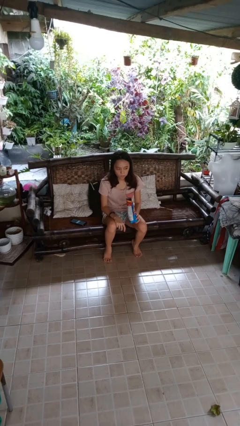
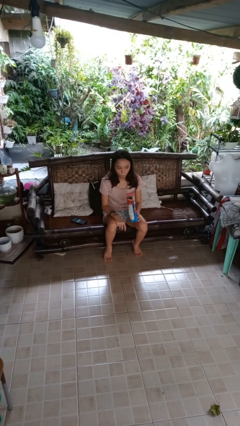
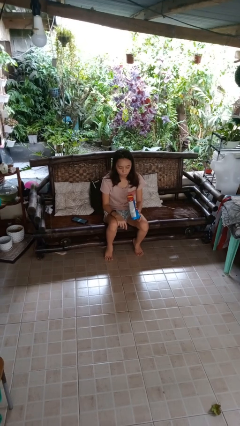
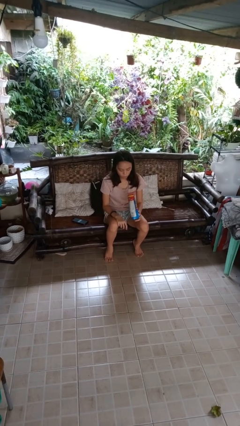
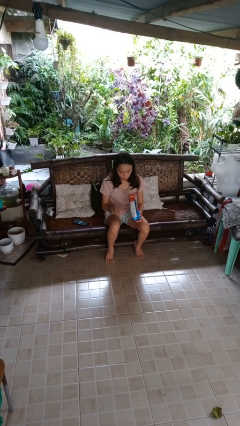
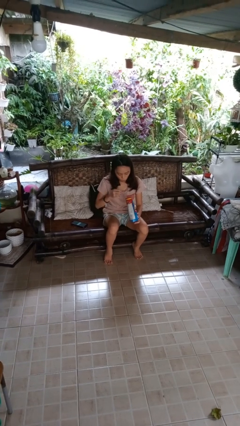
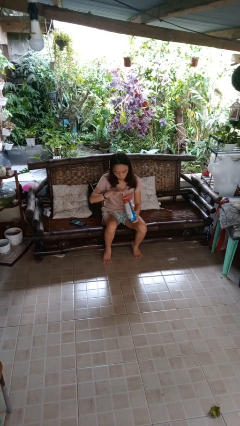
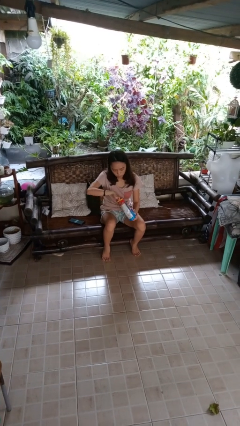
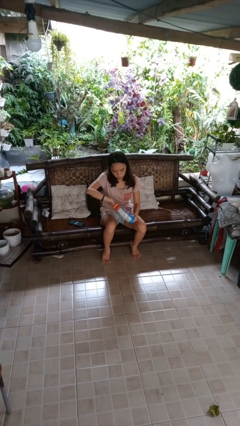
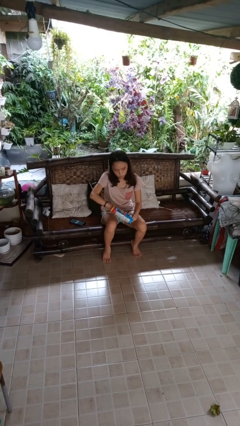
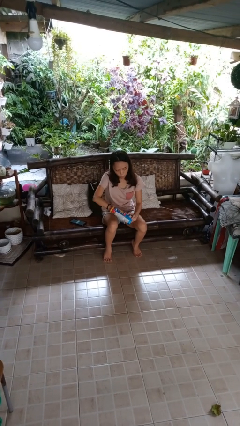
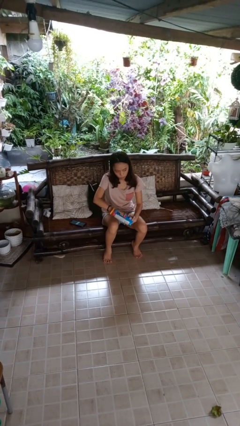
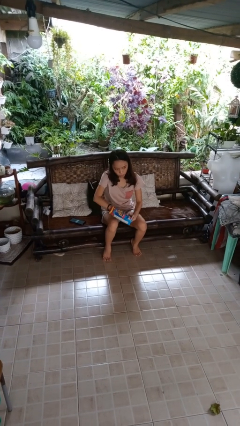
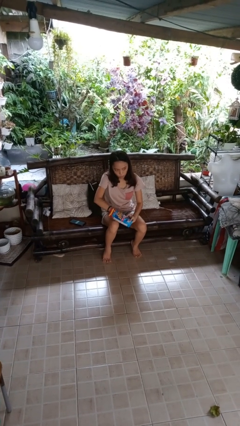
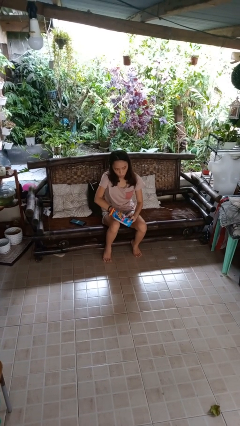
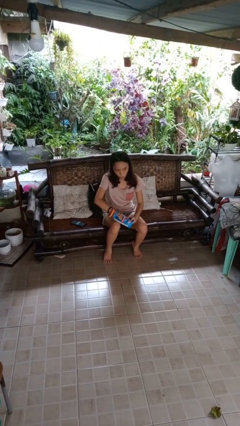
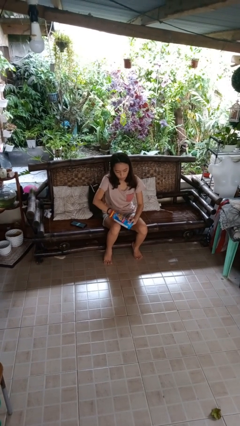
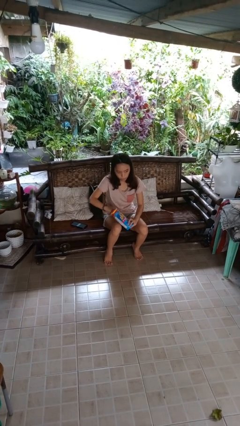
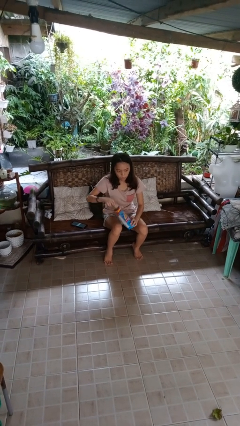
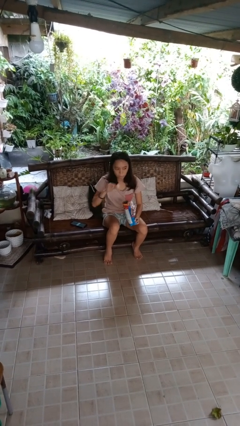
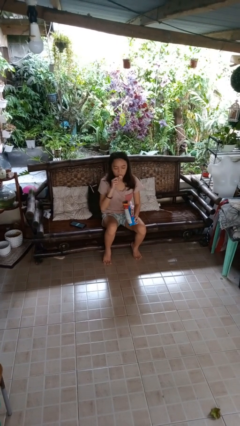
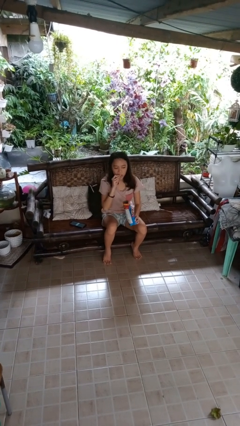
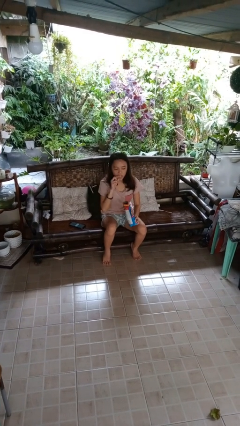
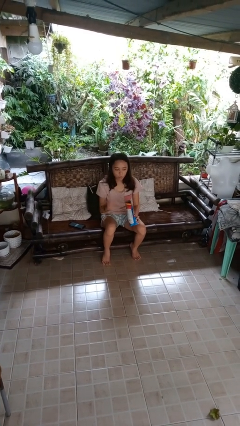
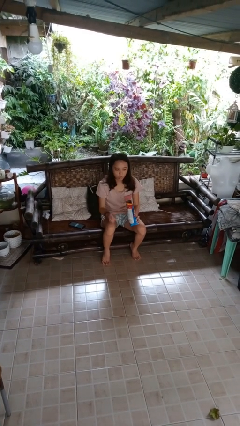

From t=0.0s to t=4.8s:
person eats snack from bag

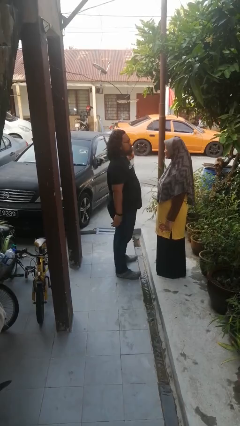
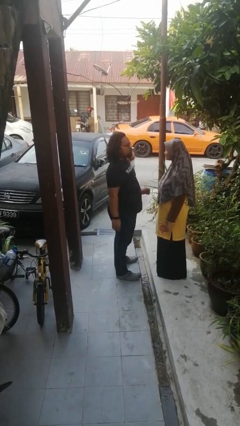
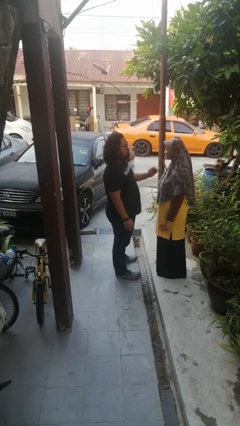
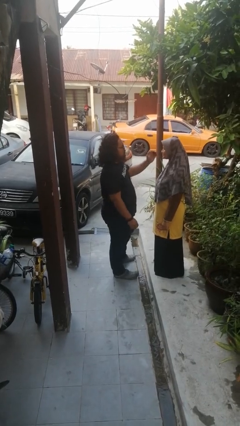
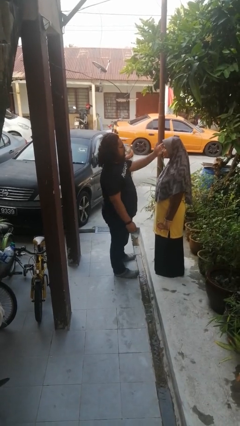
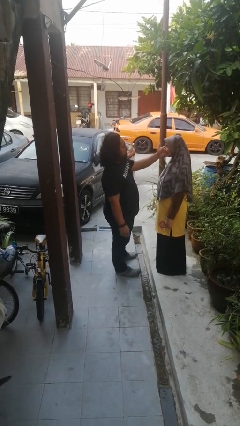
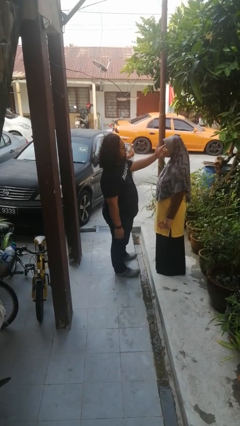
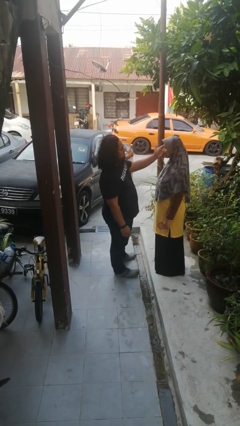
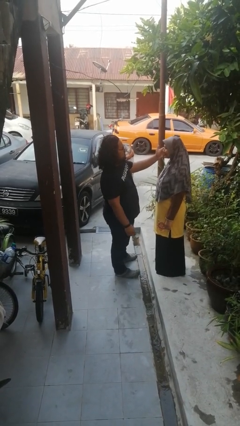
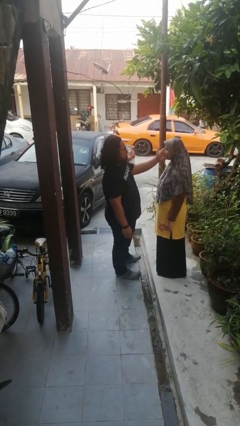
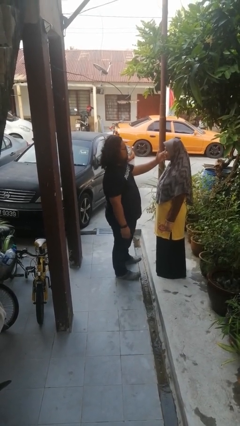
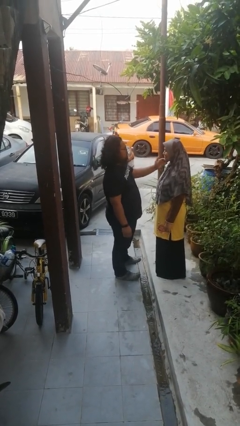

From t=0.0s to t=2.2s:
person touches face of person

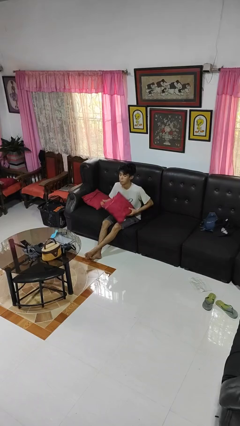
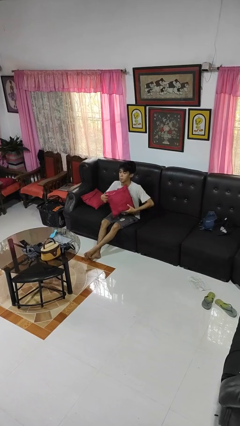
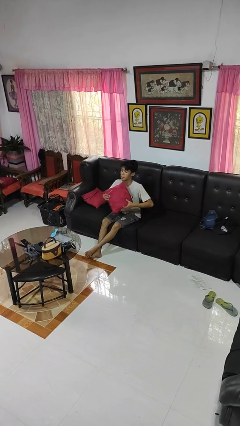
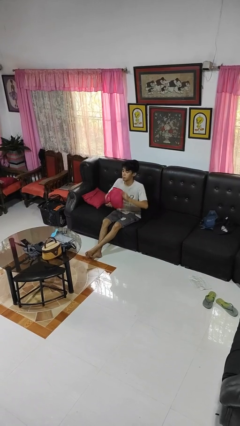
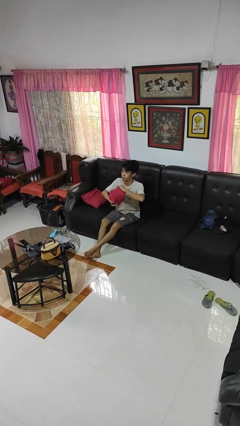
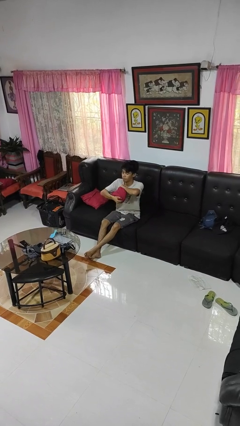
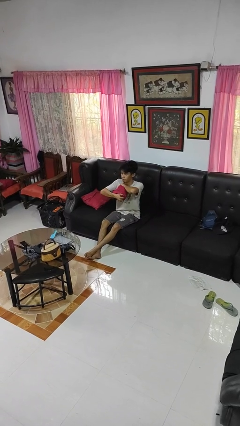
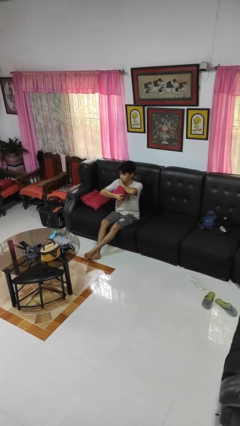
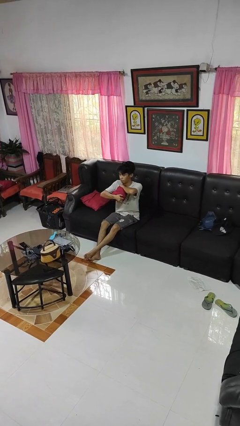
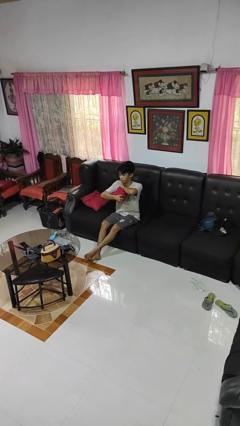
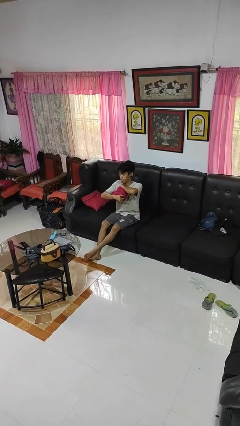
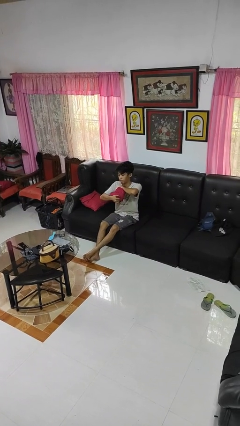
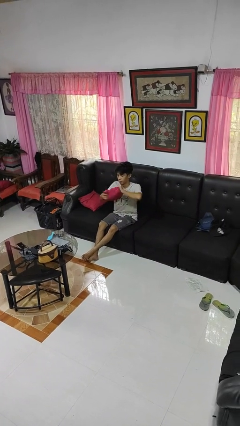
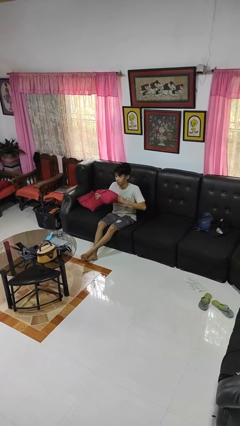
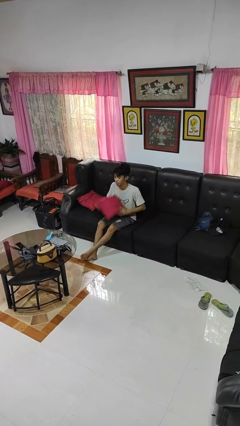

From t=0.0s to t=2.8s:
person squeezes object

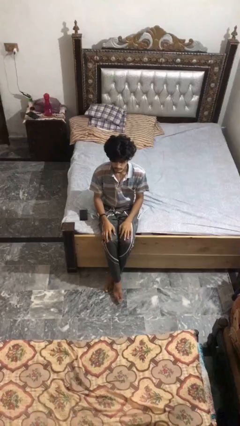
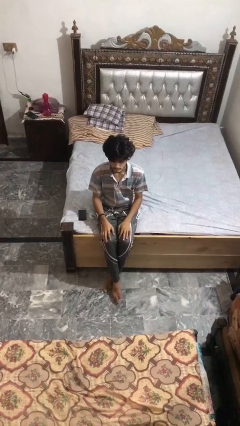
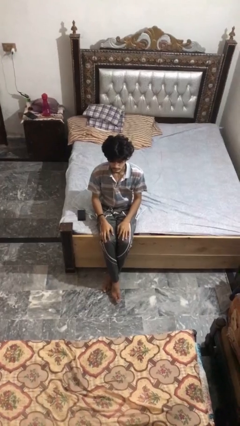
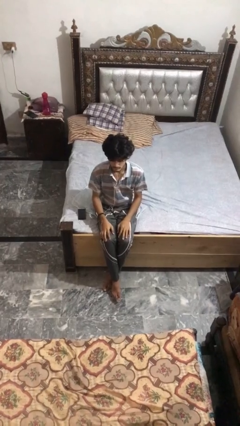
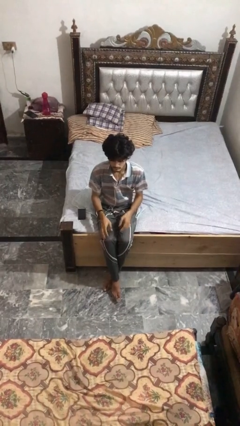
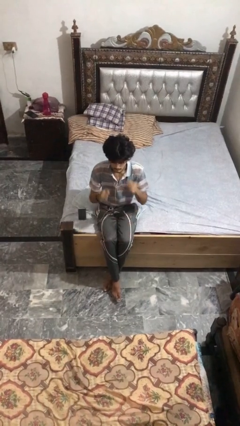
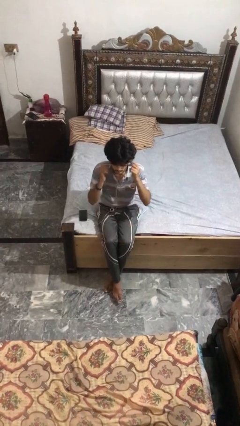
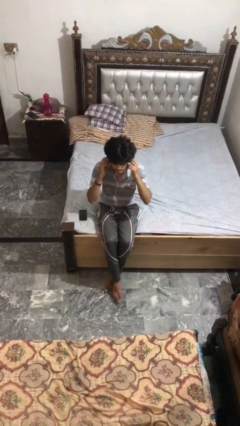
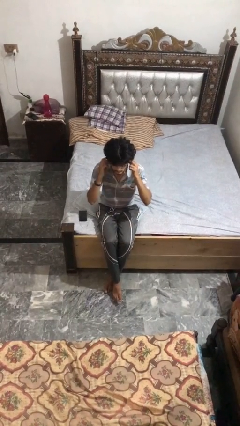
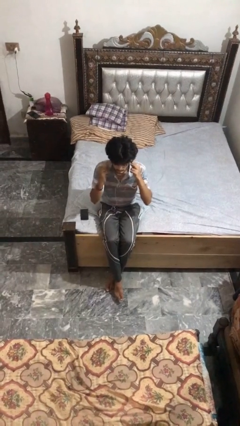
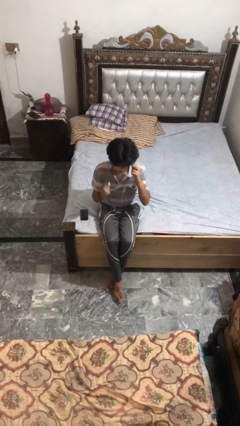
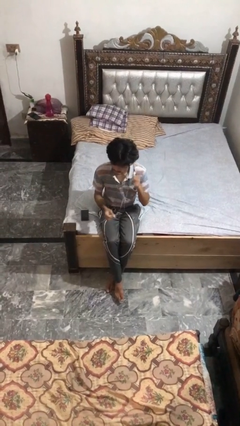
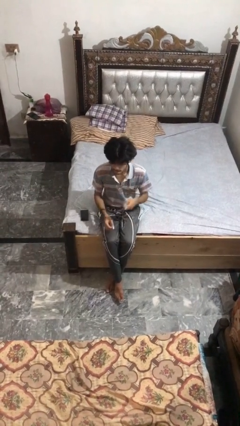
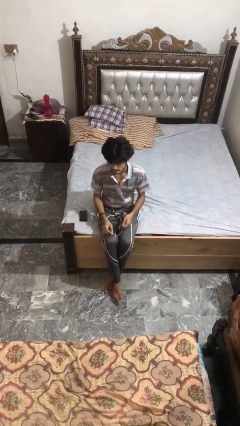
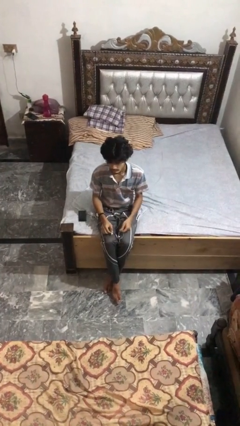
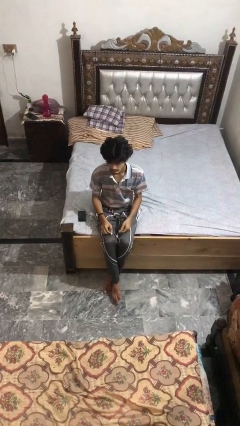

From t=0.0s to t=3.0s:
person takes off headphones

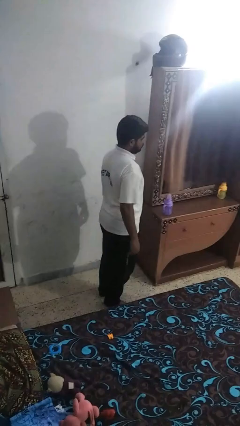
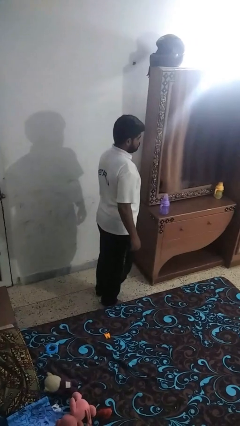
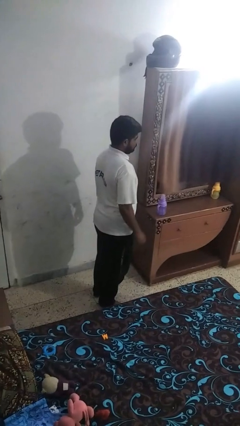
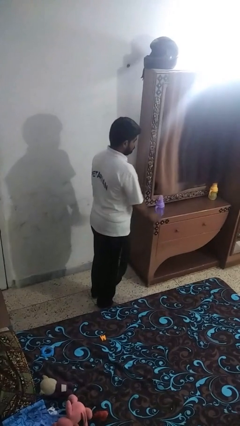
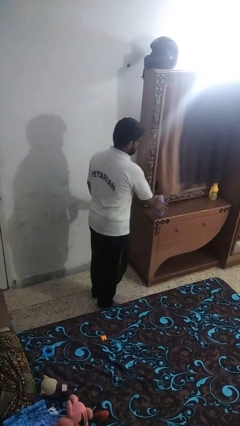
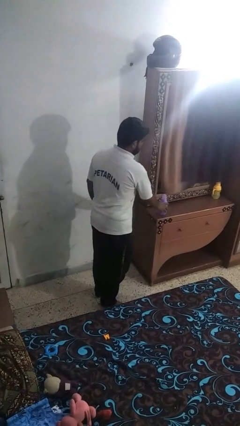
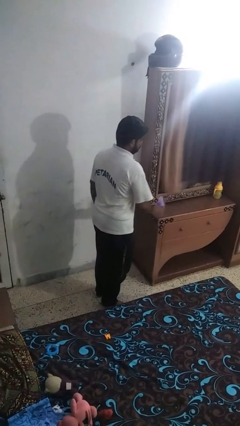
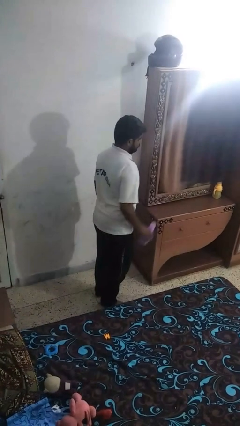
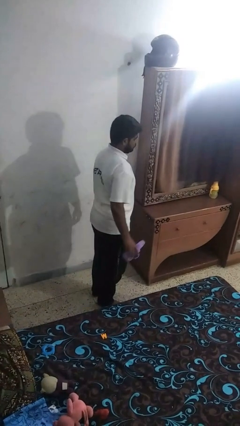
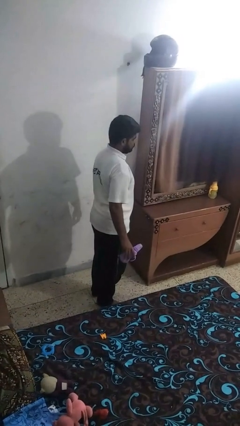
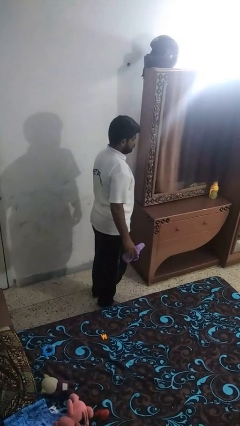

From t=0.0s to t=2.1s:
person picks up object from countertop

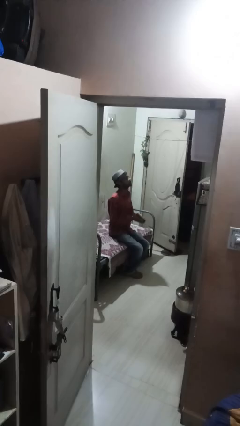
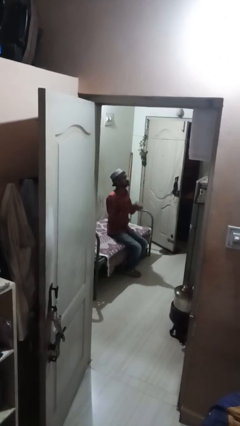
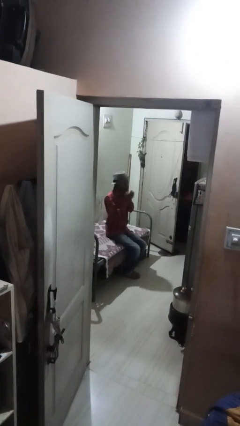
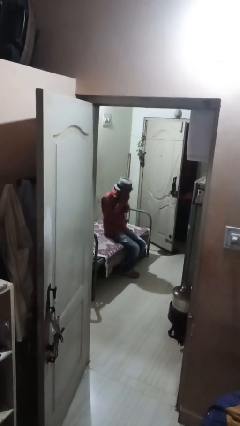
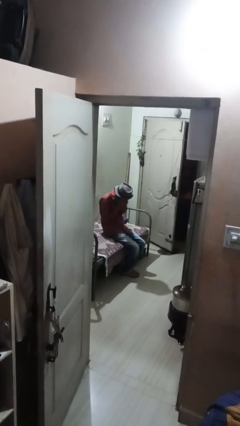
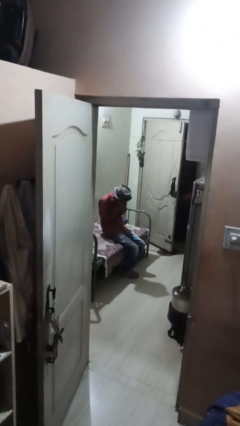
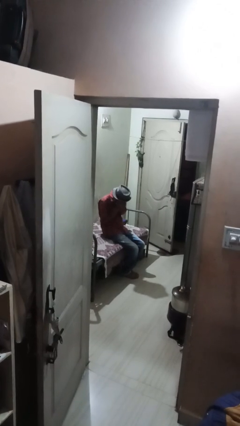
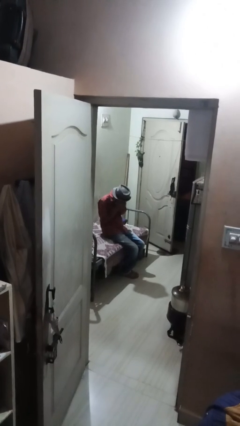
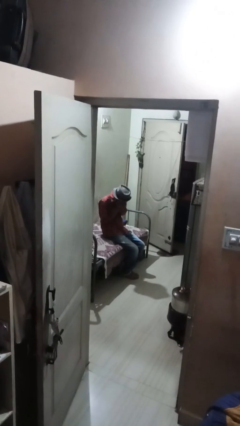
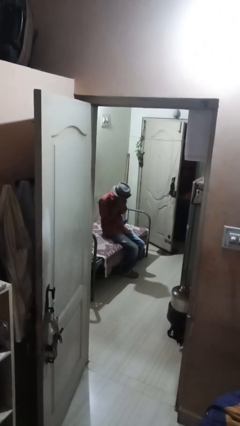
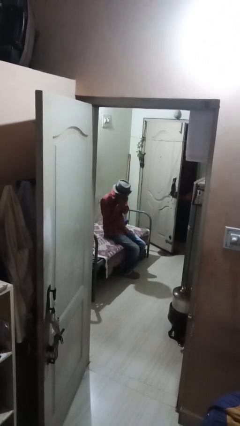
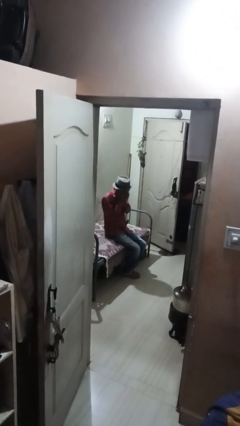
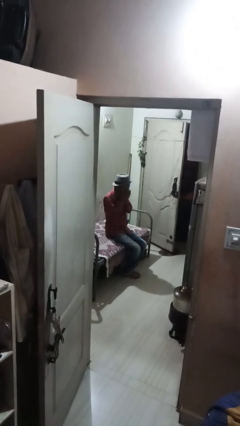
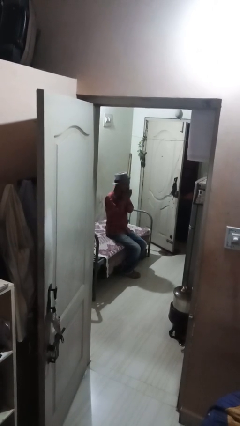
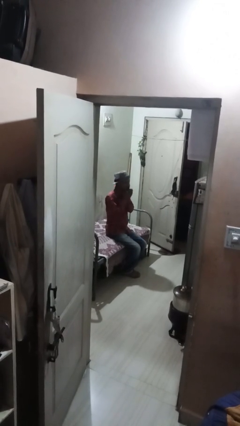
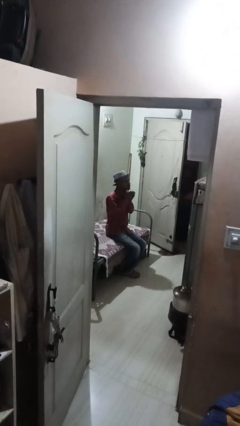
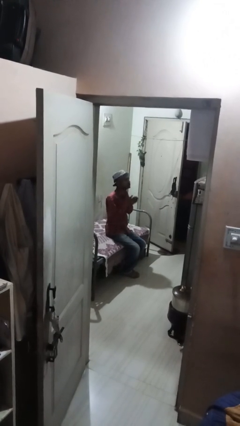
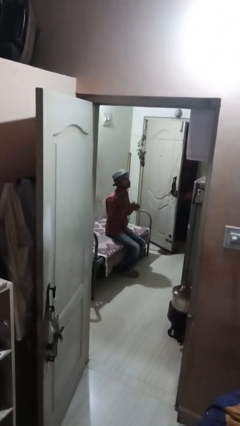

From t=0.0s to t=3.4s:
person sneezes into hand
